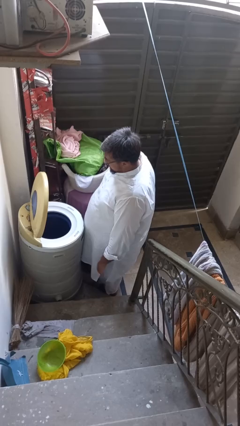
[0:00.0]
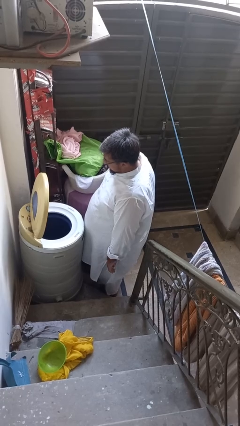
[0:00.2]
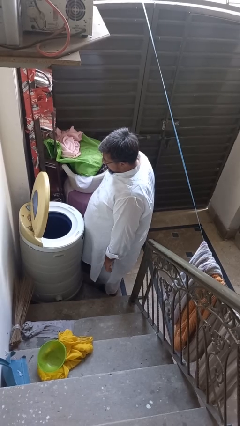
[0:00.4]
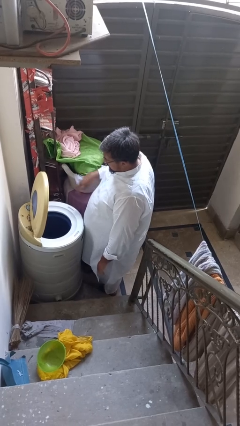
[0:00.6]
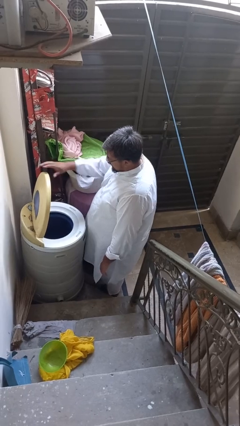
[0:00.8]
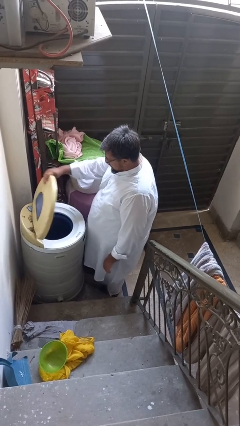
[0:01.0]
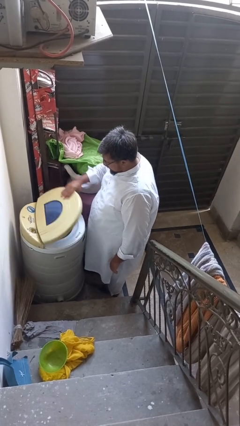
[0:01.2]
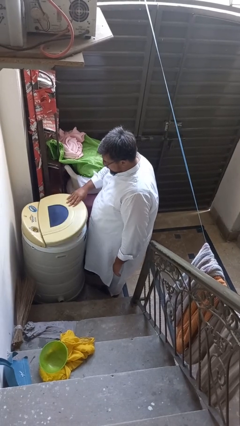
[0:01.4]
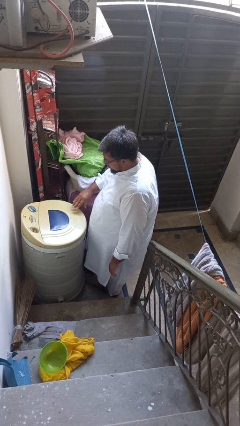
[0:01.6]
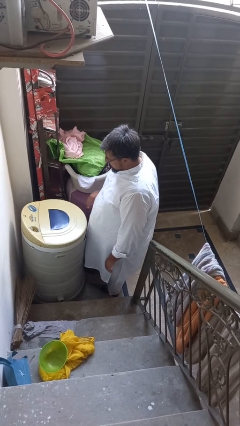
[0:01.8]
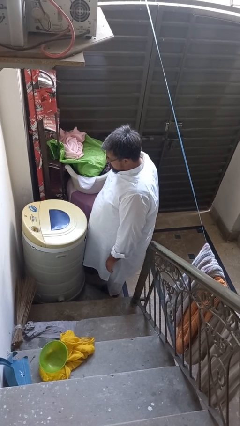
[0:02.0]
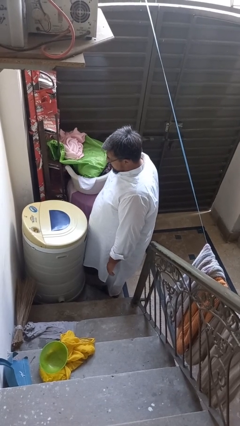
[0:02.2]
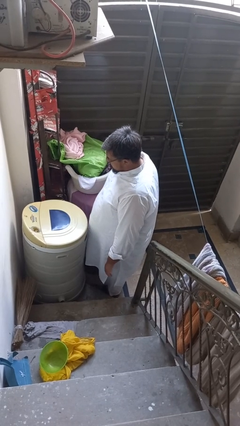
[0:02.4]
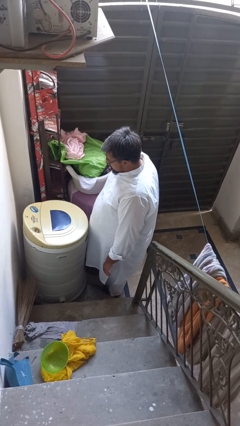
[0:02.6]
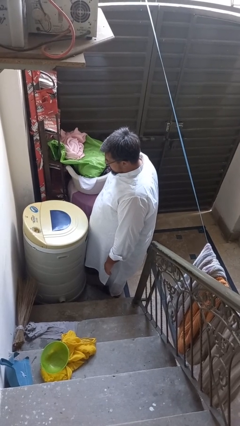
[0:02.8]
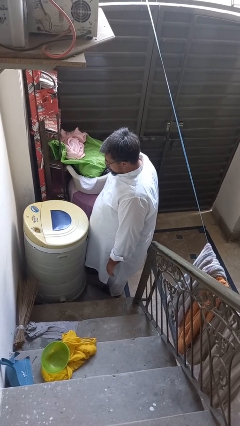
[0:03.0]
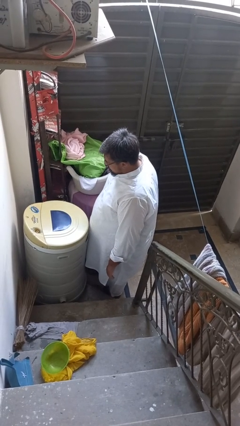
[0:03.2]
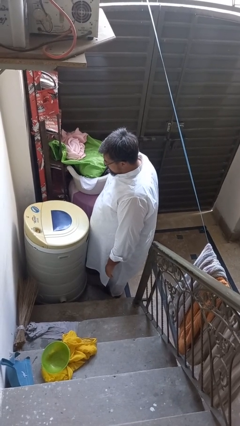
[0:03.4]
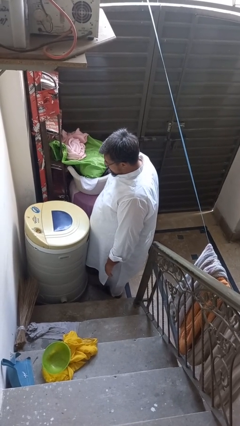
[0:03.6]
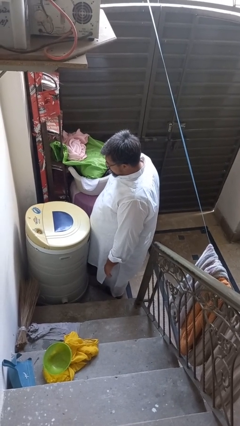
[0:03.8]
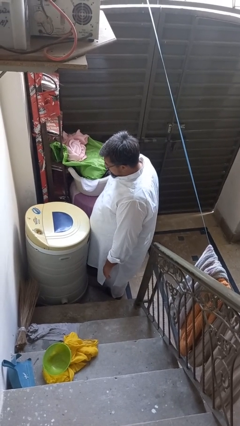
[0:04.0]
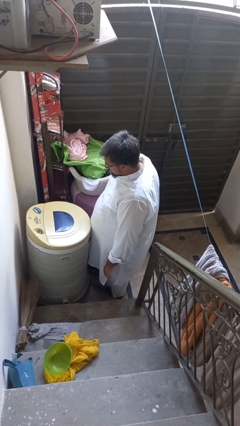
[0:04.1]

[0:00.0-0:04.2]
person closes clothes washer

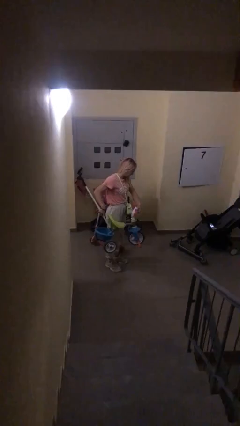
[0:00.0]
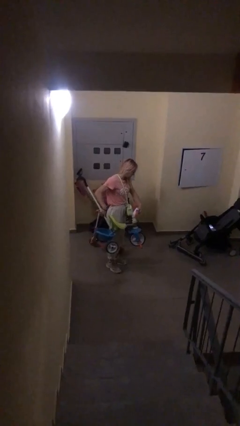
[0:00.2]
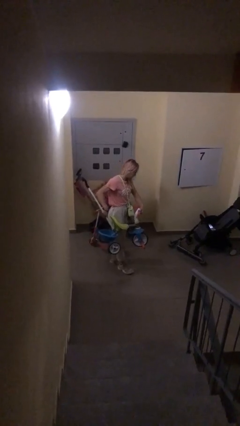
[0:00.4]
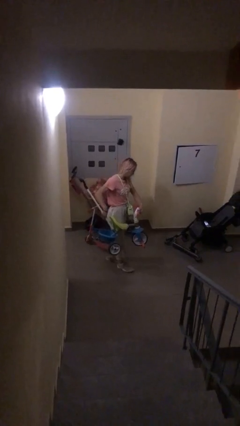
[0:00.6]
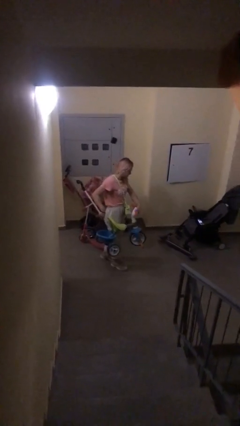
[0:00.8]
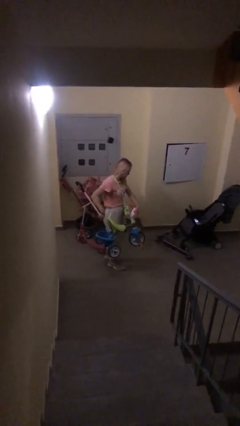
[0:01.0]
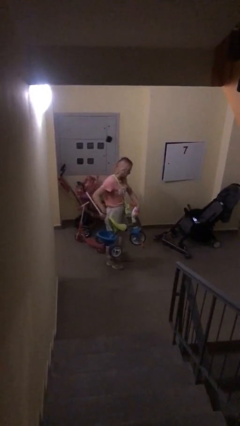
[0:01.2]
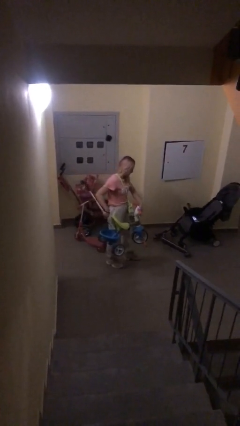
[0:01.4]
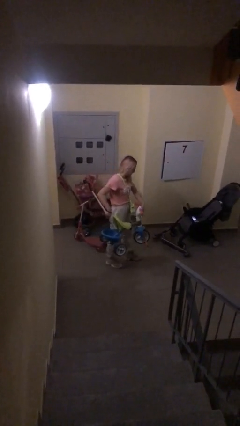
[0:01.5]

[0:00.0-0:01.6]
person carries bicycle

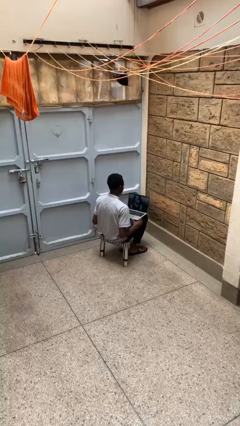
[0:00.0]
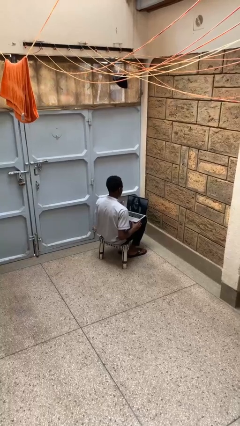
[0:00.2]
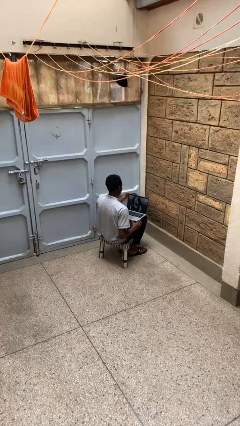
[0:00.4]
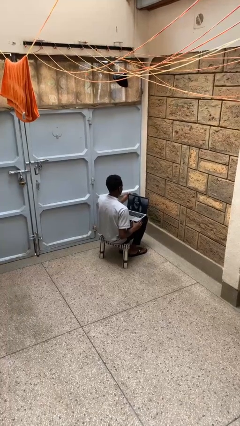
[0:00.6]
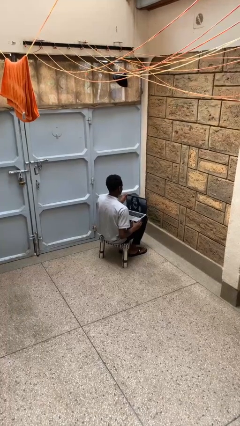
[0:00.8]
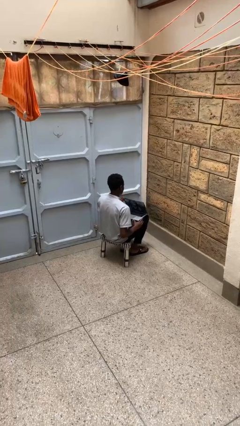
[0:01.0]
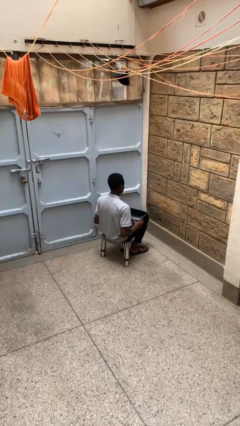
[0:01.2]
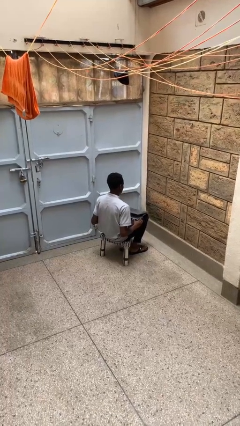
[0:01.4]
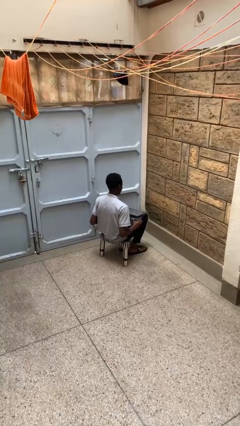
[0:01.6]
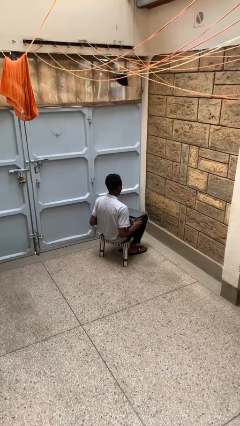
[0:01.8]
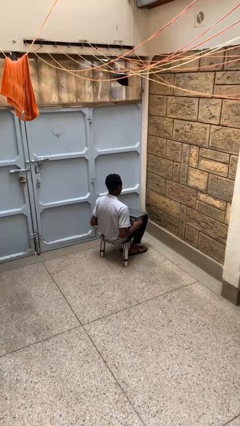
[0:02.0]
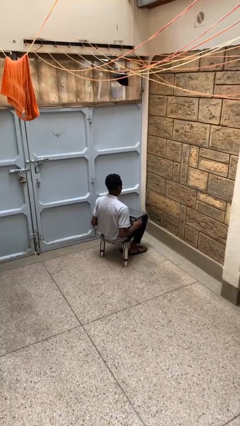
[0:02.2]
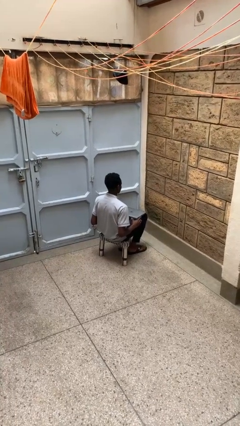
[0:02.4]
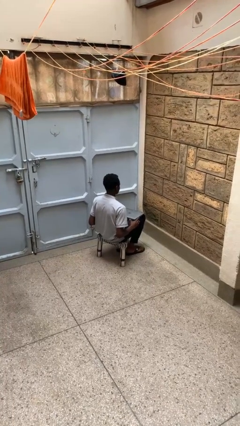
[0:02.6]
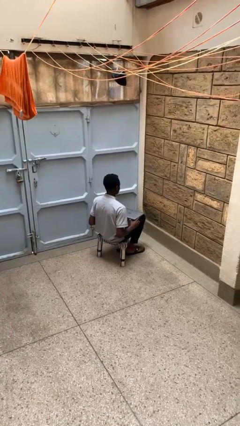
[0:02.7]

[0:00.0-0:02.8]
person closes laptop

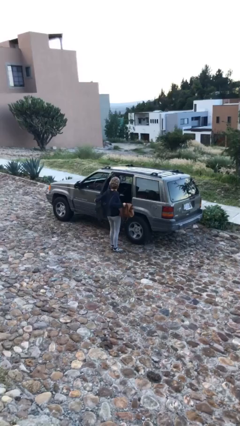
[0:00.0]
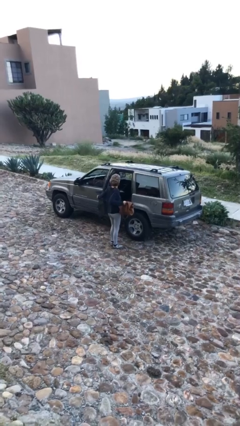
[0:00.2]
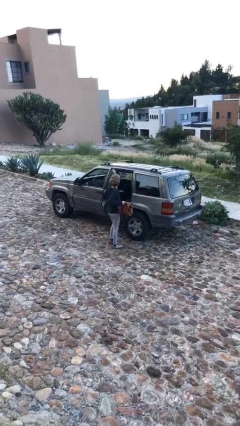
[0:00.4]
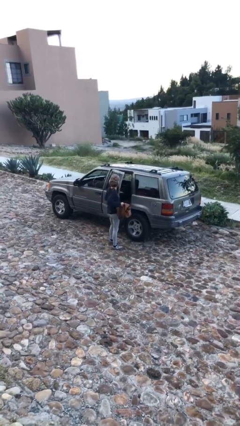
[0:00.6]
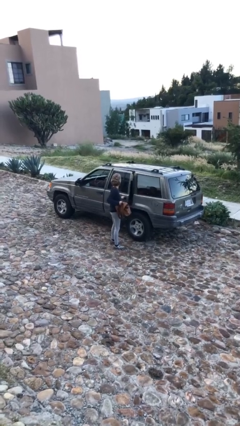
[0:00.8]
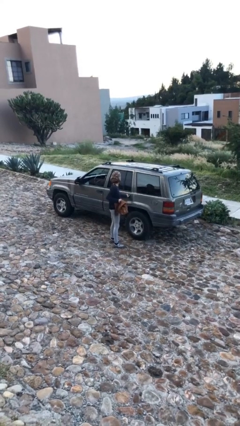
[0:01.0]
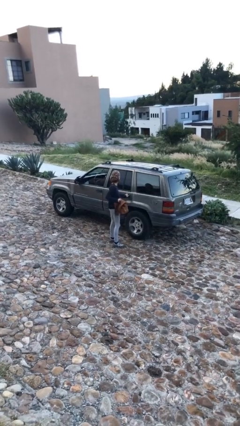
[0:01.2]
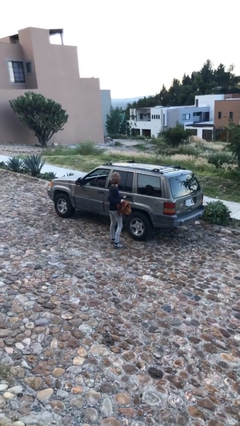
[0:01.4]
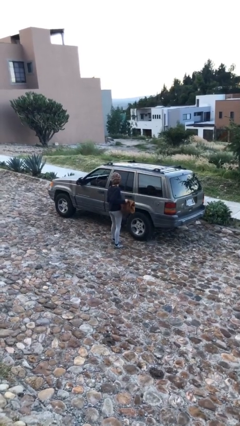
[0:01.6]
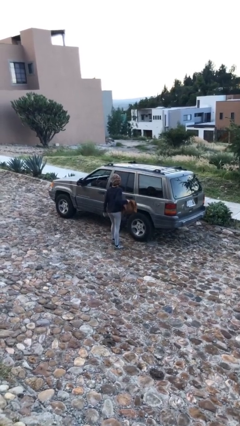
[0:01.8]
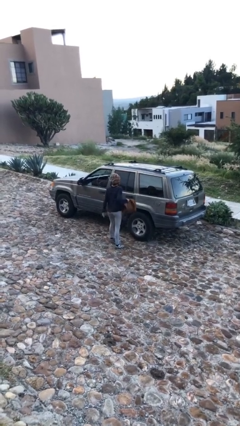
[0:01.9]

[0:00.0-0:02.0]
person closes car door

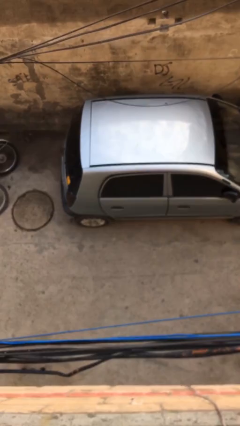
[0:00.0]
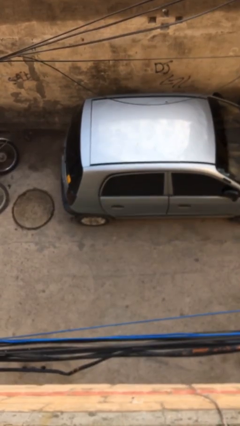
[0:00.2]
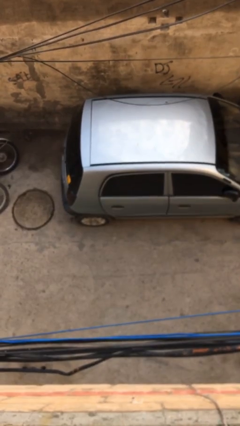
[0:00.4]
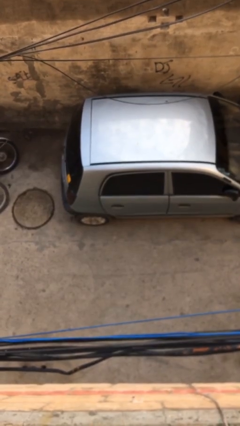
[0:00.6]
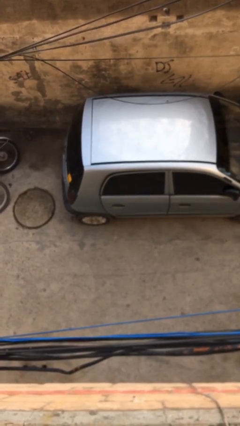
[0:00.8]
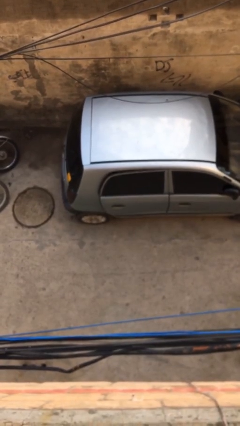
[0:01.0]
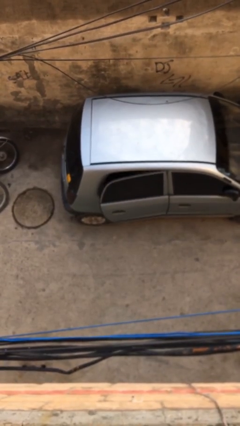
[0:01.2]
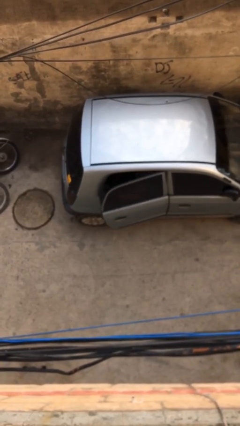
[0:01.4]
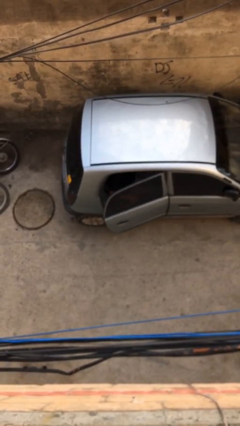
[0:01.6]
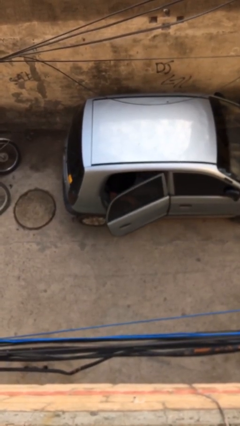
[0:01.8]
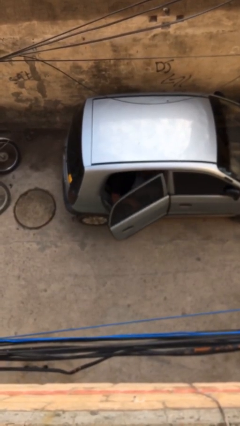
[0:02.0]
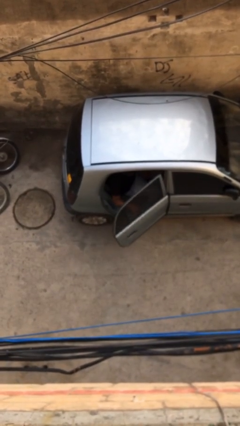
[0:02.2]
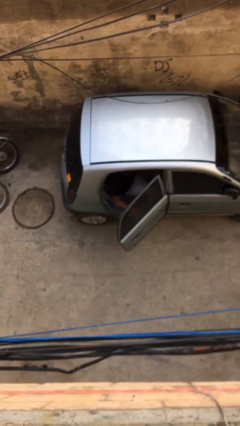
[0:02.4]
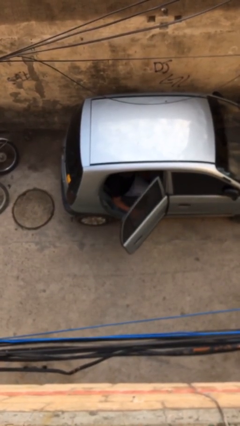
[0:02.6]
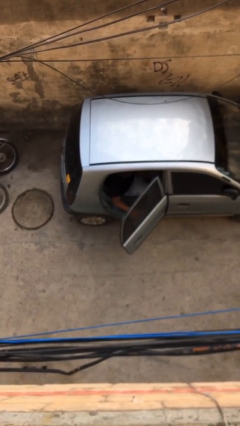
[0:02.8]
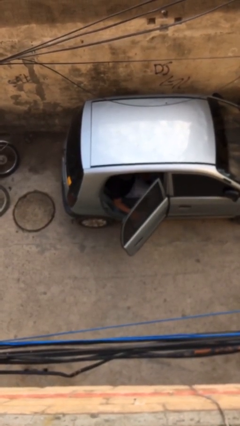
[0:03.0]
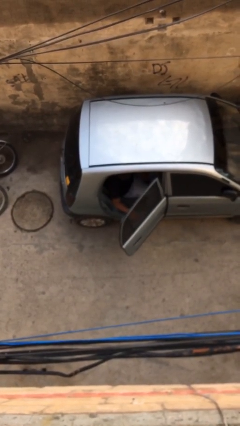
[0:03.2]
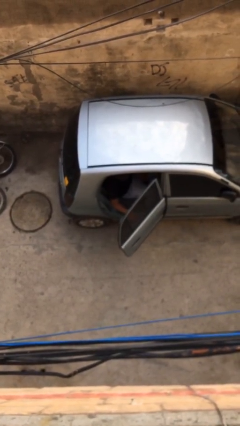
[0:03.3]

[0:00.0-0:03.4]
person opens car door

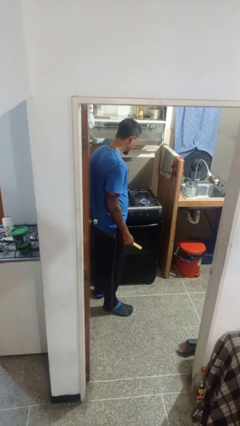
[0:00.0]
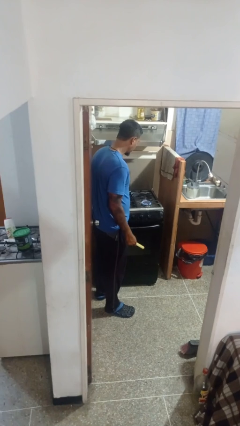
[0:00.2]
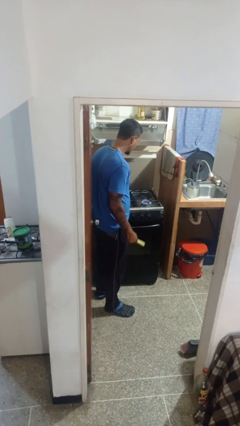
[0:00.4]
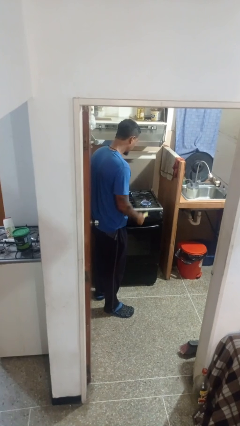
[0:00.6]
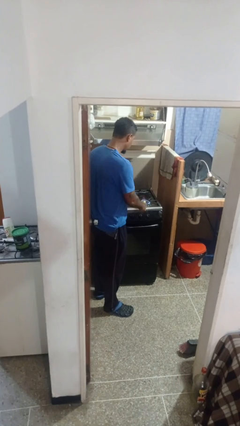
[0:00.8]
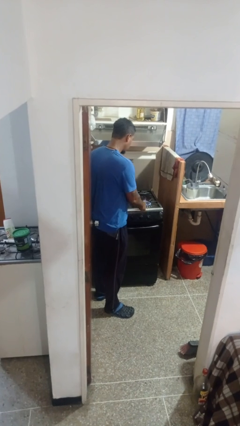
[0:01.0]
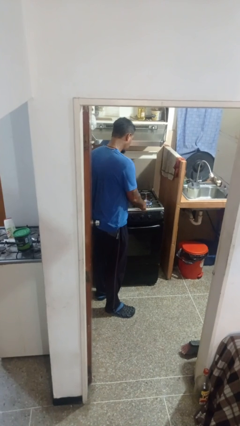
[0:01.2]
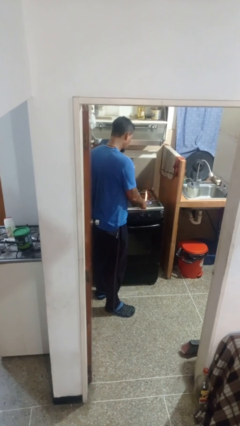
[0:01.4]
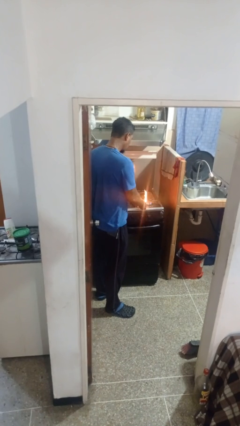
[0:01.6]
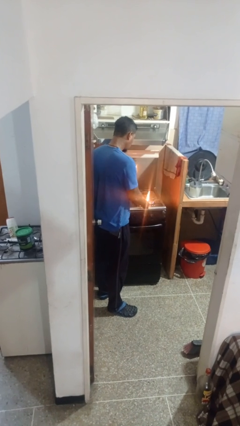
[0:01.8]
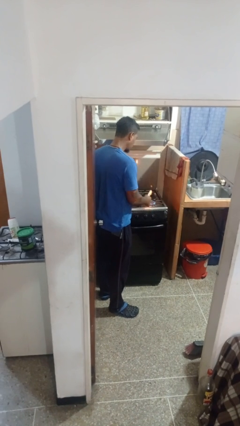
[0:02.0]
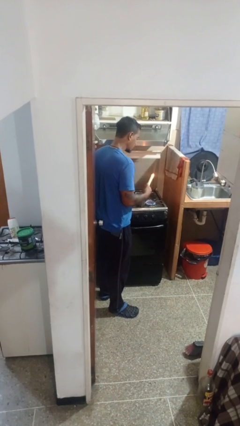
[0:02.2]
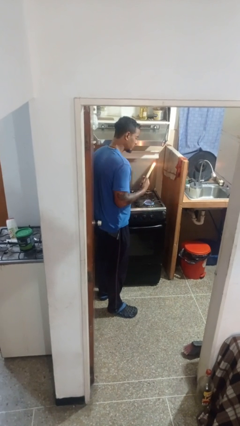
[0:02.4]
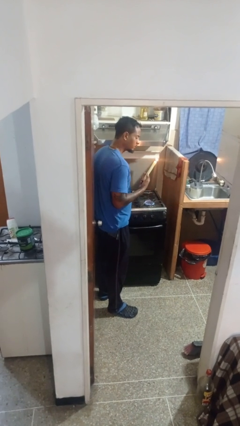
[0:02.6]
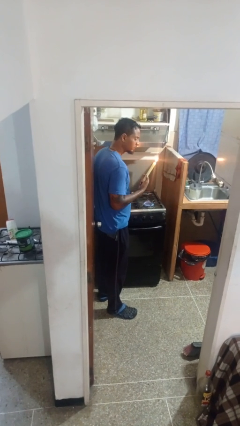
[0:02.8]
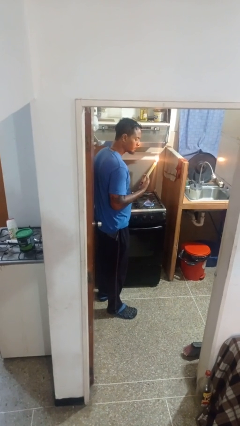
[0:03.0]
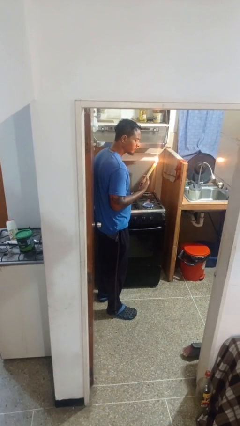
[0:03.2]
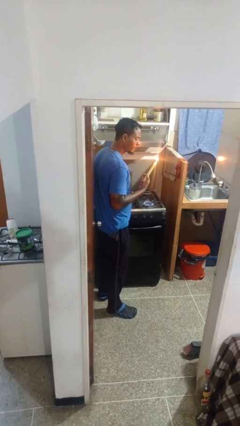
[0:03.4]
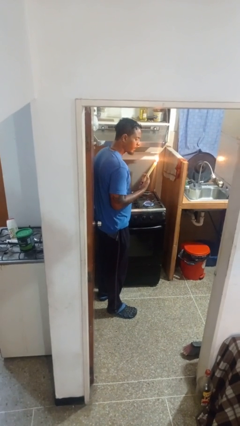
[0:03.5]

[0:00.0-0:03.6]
person lights candle
